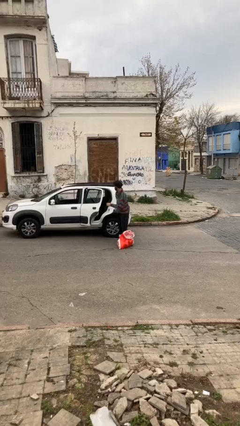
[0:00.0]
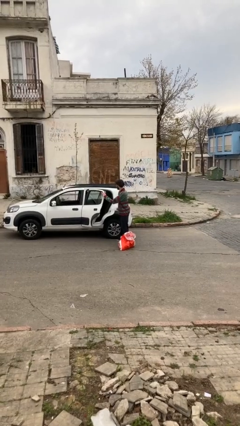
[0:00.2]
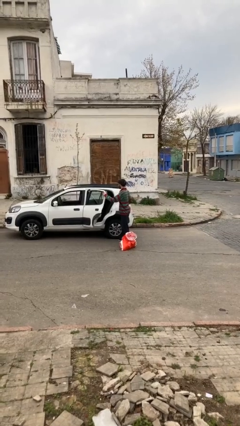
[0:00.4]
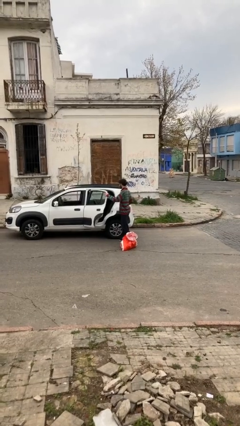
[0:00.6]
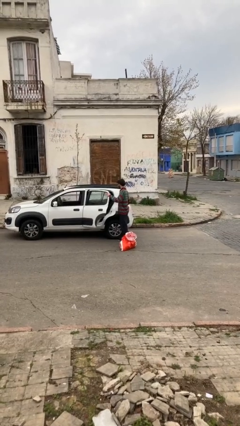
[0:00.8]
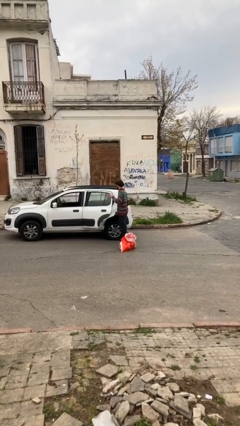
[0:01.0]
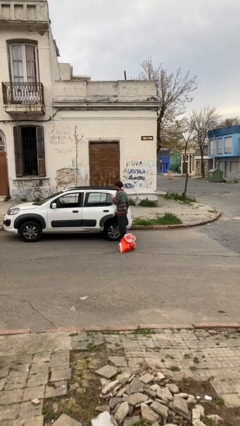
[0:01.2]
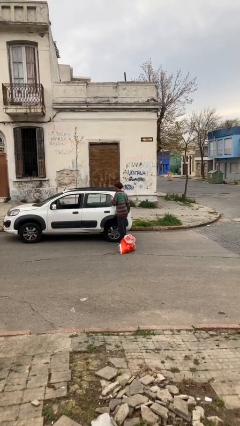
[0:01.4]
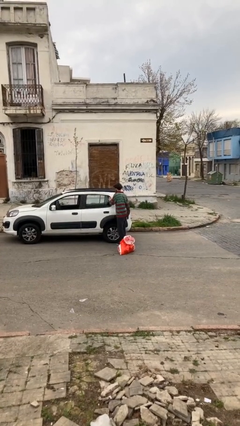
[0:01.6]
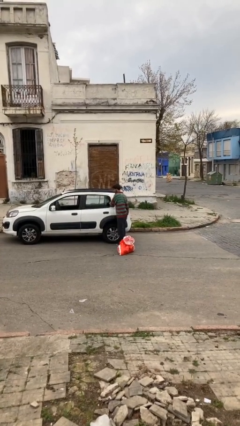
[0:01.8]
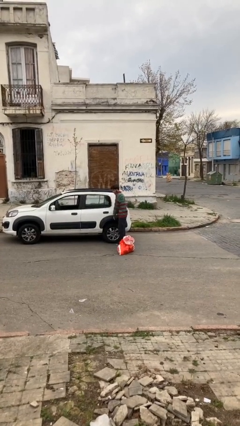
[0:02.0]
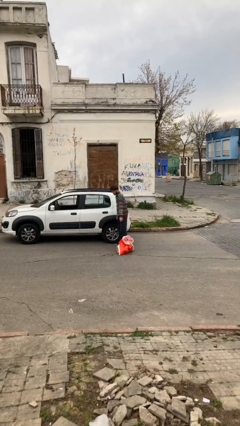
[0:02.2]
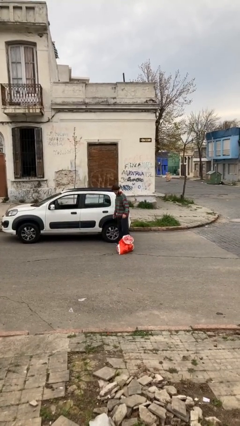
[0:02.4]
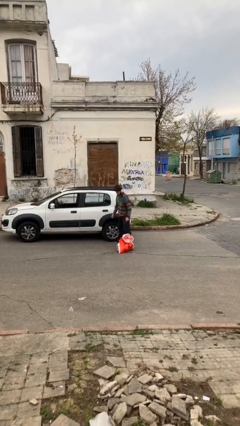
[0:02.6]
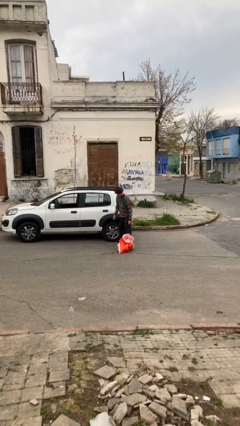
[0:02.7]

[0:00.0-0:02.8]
person closes car door

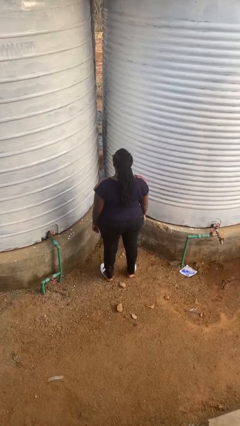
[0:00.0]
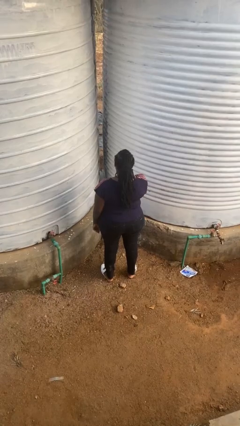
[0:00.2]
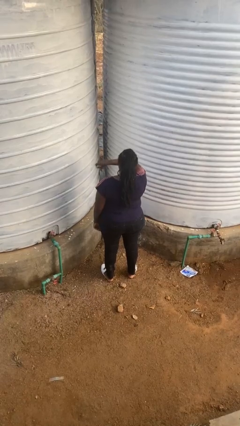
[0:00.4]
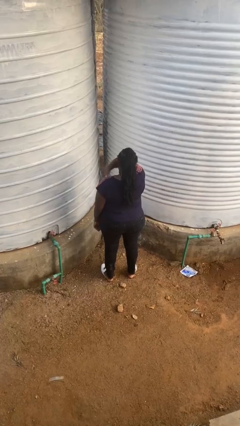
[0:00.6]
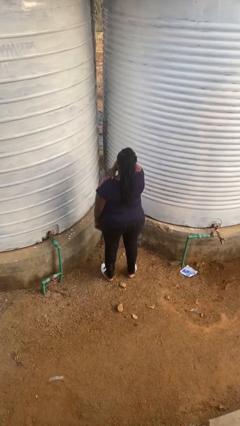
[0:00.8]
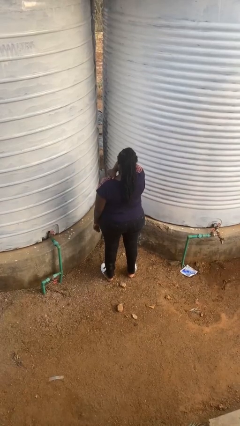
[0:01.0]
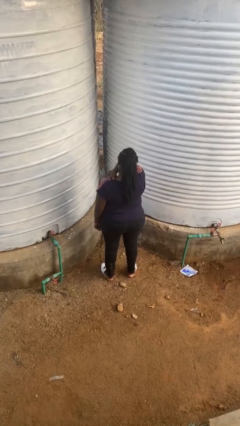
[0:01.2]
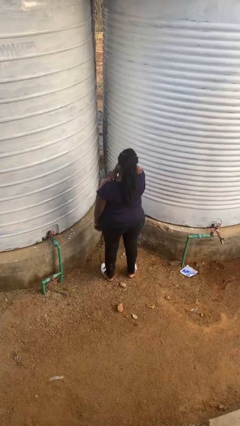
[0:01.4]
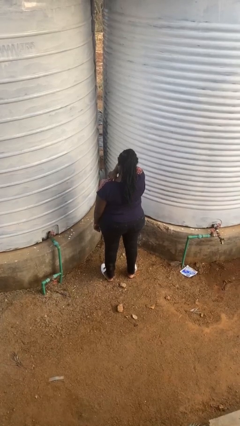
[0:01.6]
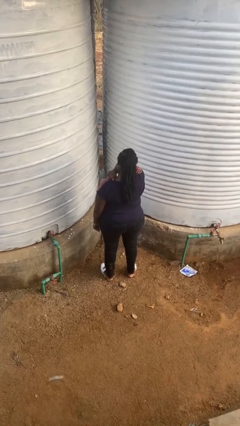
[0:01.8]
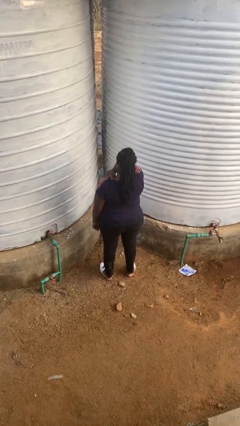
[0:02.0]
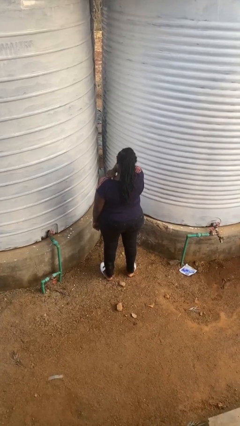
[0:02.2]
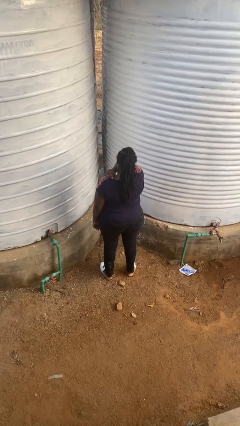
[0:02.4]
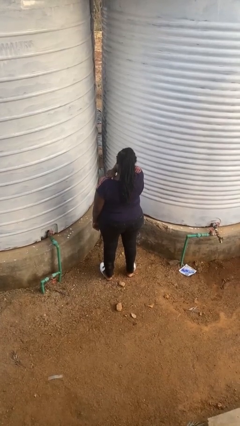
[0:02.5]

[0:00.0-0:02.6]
person sneezes into arm

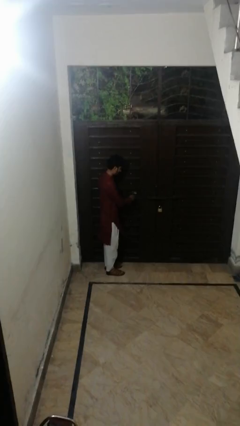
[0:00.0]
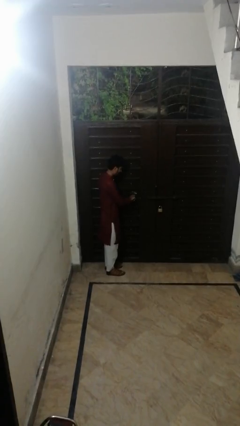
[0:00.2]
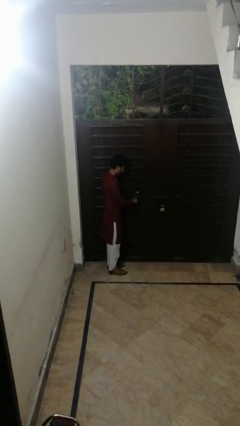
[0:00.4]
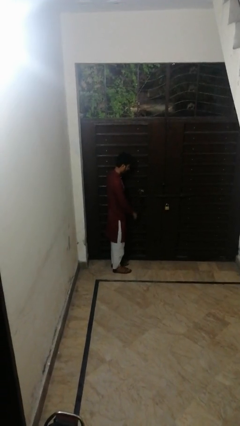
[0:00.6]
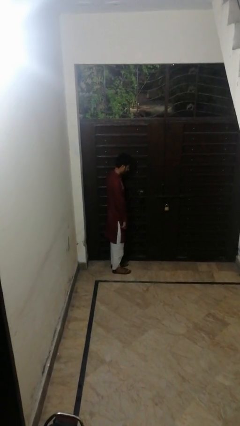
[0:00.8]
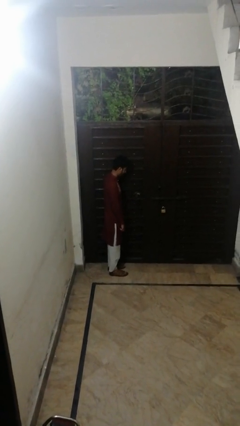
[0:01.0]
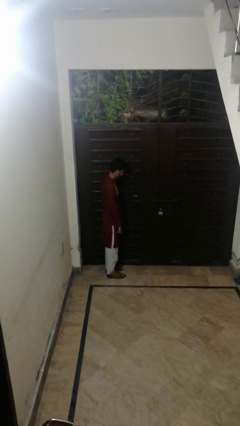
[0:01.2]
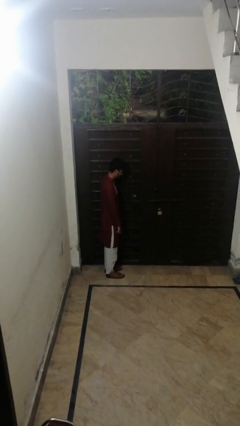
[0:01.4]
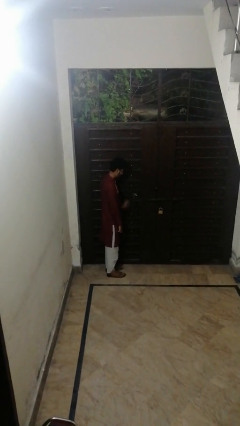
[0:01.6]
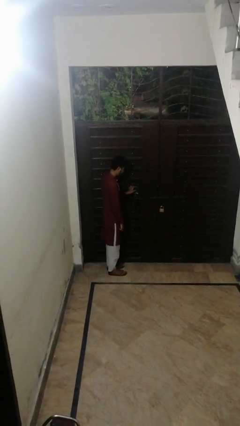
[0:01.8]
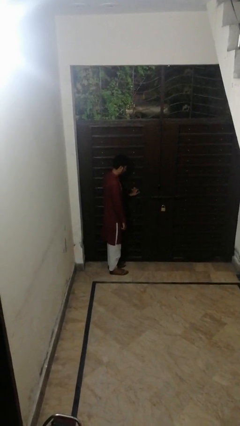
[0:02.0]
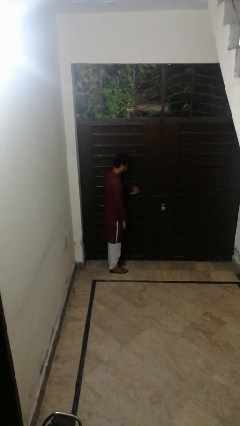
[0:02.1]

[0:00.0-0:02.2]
person unlocks door with keys

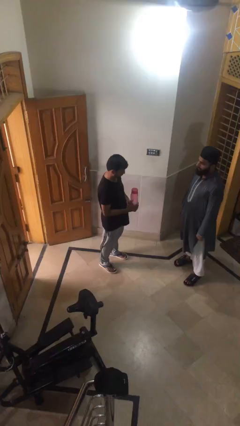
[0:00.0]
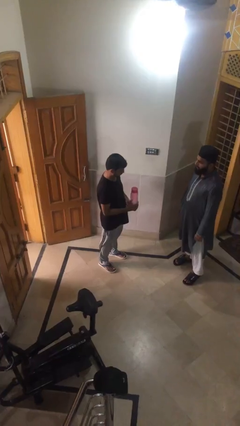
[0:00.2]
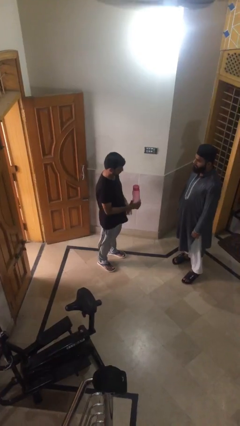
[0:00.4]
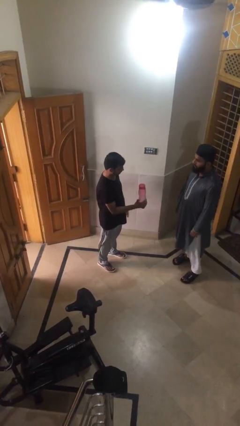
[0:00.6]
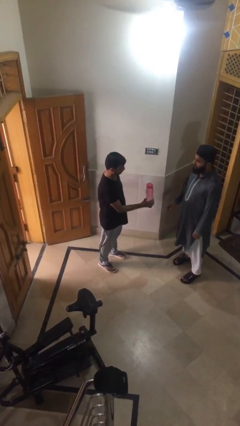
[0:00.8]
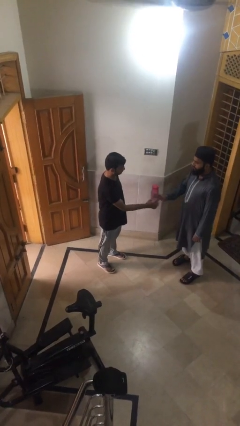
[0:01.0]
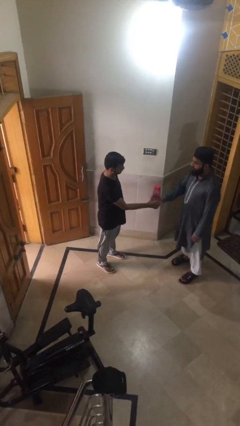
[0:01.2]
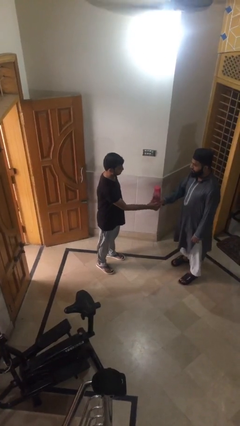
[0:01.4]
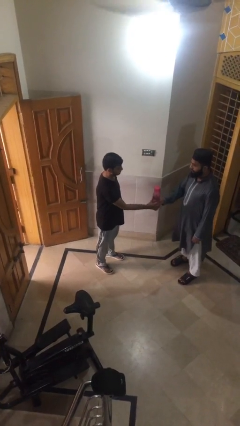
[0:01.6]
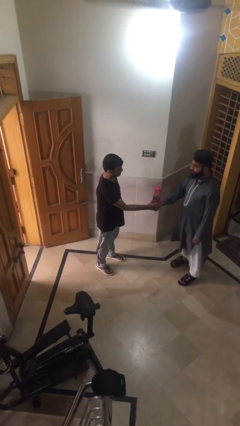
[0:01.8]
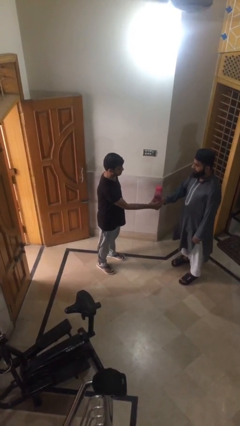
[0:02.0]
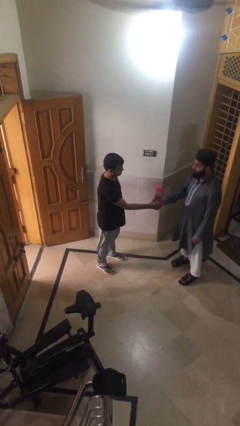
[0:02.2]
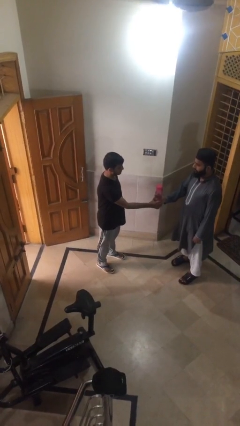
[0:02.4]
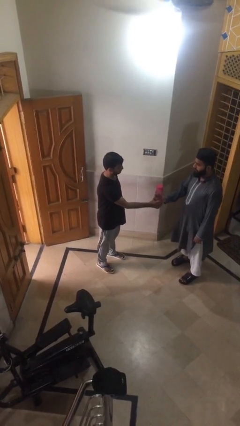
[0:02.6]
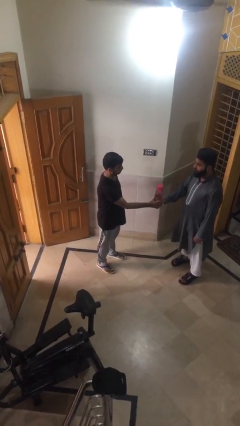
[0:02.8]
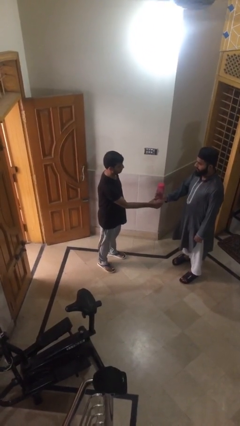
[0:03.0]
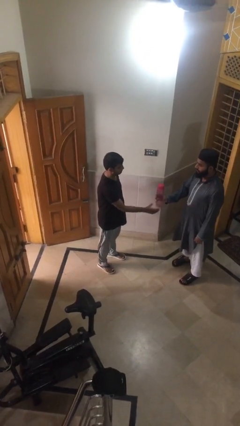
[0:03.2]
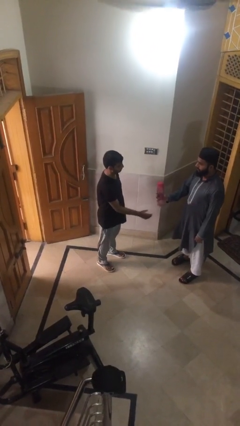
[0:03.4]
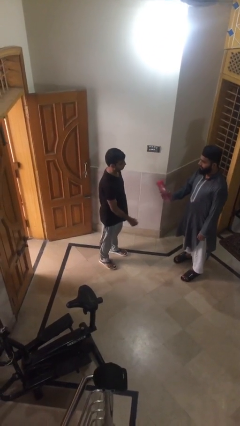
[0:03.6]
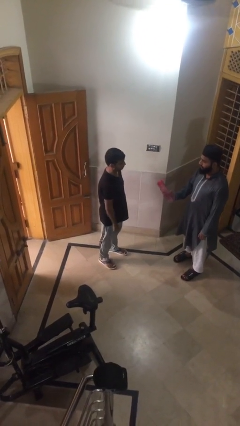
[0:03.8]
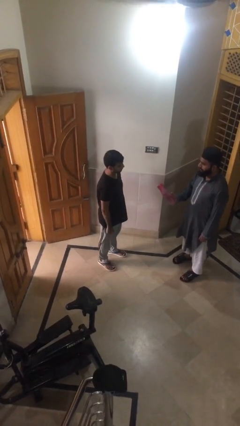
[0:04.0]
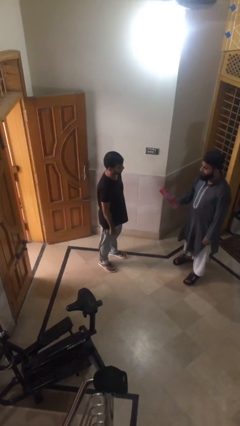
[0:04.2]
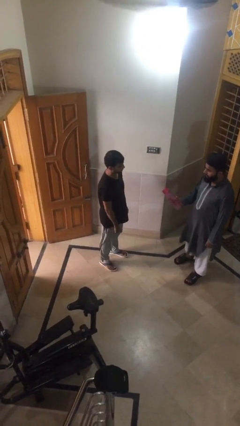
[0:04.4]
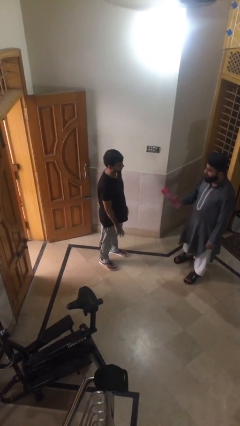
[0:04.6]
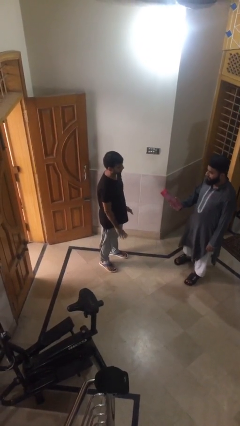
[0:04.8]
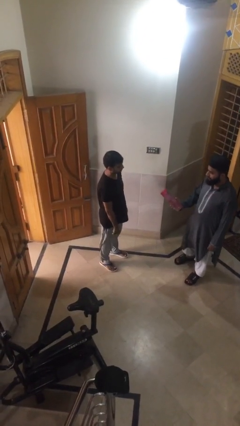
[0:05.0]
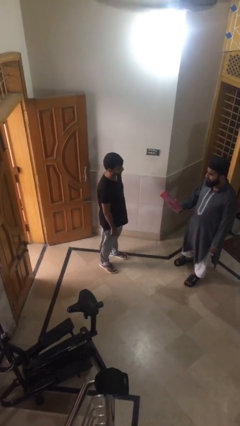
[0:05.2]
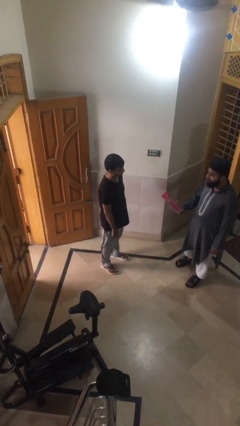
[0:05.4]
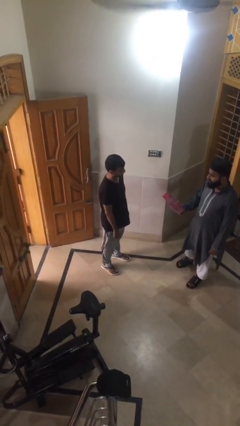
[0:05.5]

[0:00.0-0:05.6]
person transfers object to person

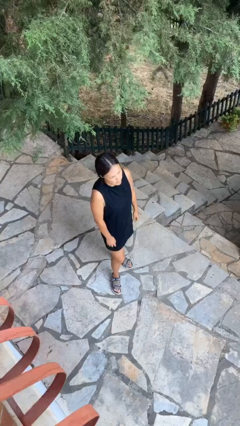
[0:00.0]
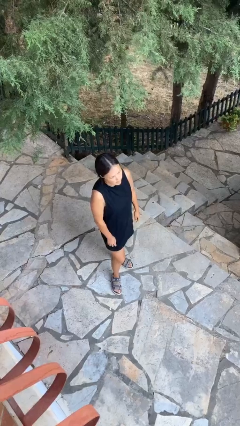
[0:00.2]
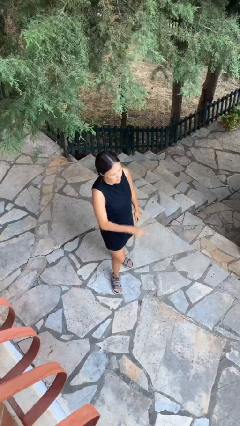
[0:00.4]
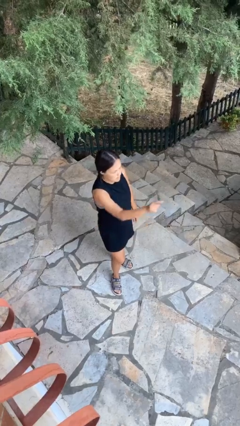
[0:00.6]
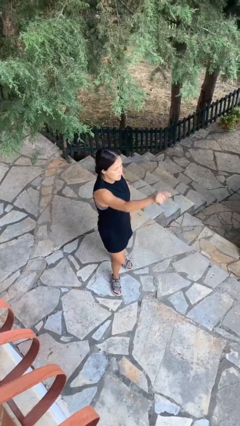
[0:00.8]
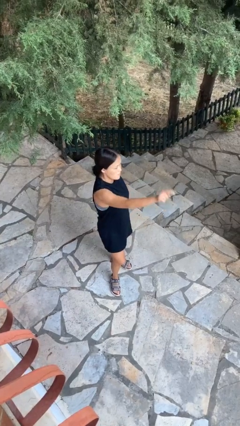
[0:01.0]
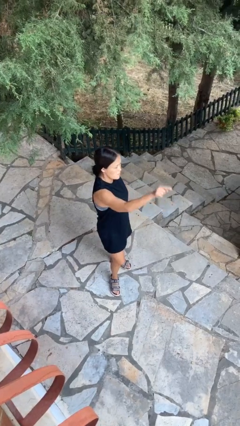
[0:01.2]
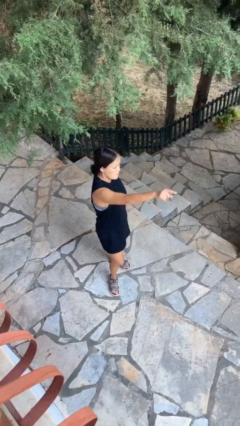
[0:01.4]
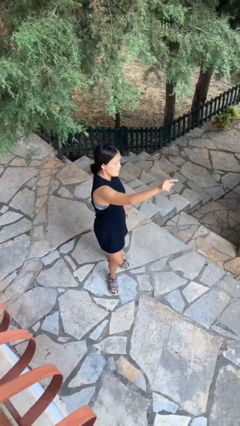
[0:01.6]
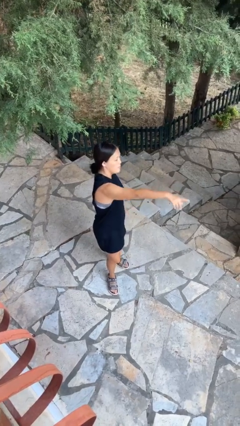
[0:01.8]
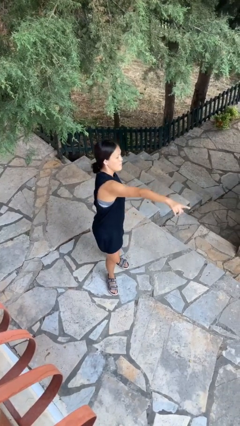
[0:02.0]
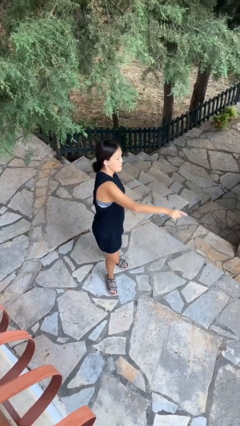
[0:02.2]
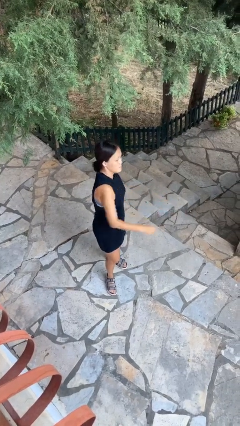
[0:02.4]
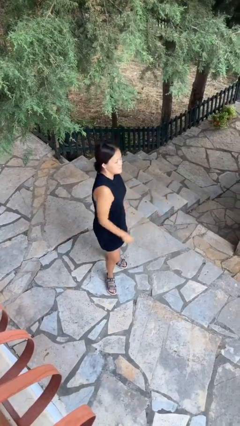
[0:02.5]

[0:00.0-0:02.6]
person points at person

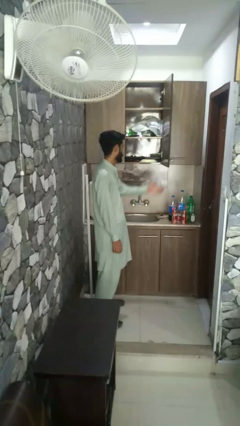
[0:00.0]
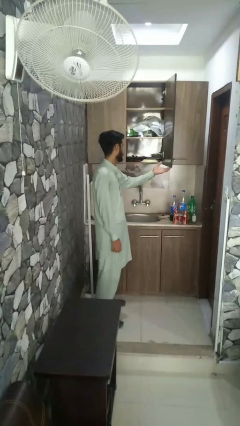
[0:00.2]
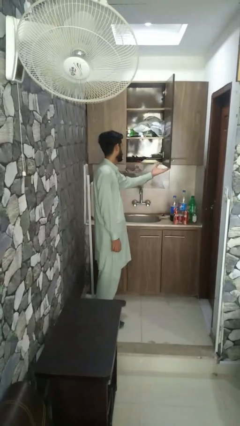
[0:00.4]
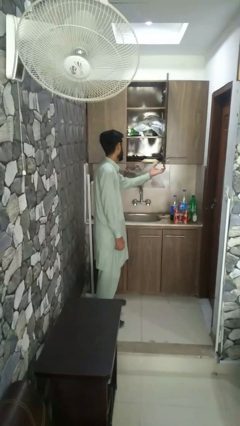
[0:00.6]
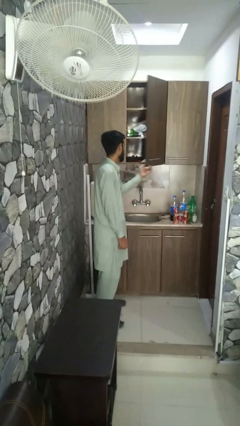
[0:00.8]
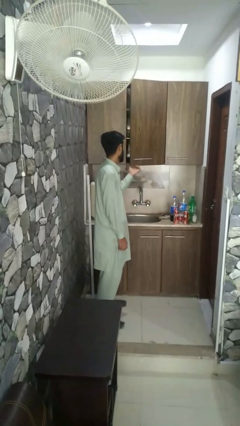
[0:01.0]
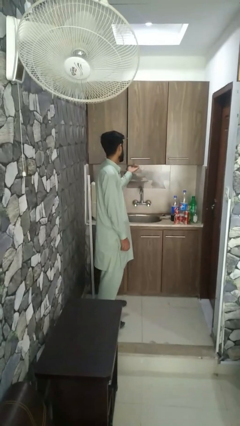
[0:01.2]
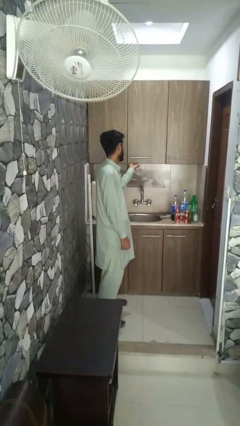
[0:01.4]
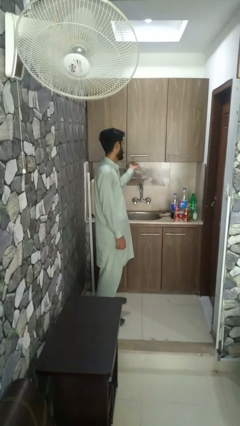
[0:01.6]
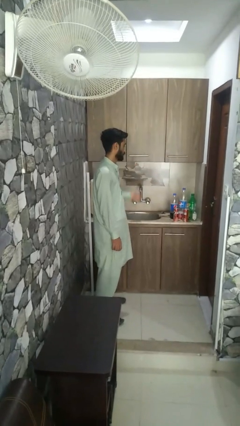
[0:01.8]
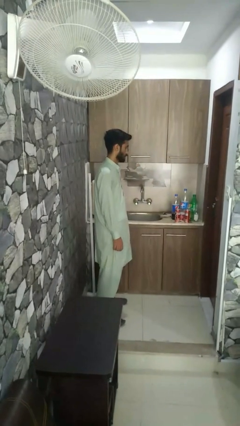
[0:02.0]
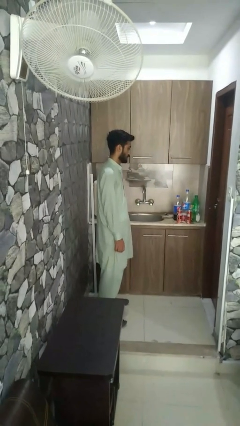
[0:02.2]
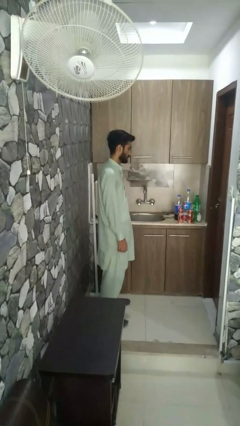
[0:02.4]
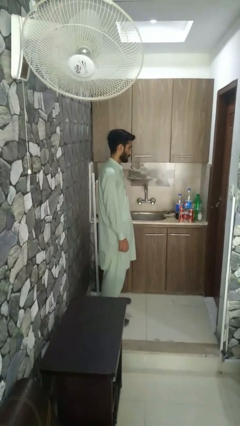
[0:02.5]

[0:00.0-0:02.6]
person closes closet door
